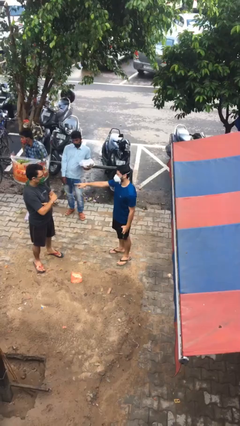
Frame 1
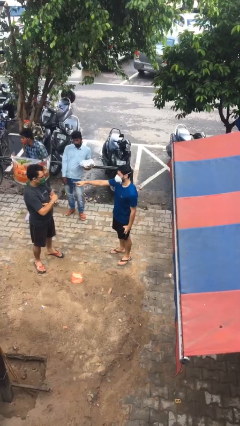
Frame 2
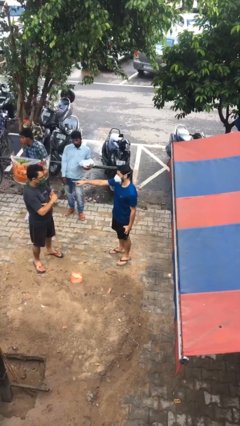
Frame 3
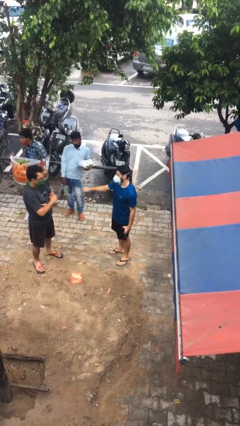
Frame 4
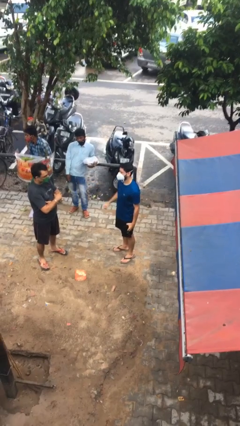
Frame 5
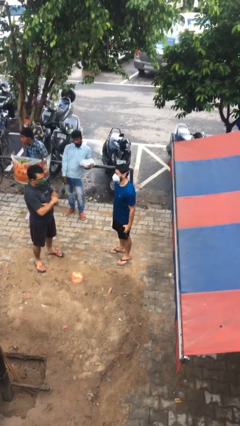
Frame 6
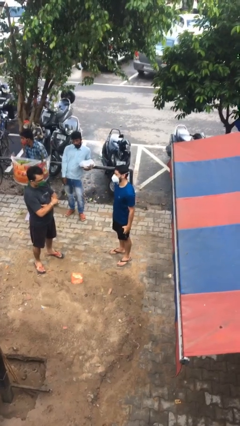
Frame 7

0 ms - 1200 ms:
person points at person

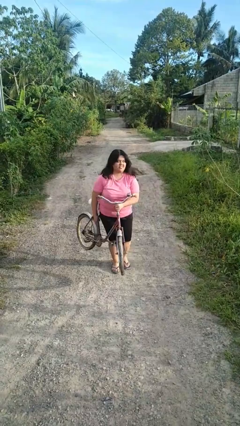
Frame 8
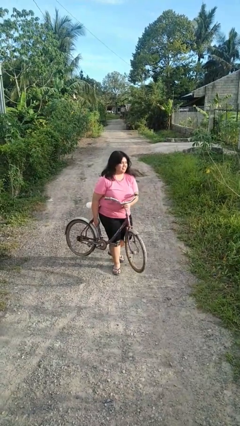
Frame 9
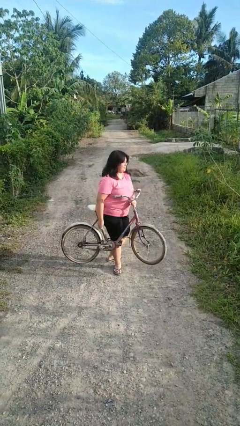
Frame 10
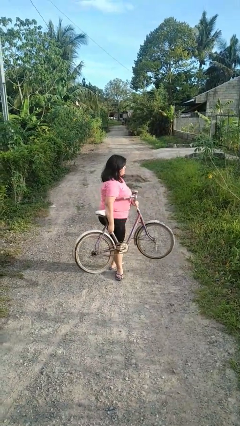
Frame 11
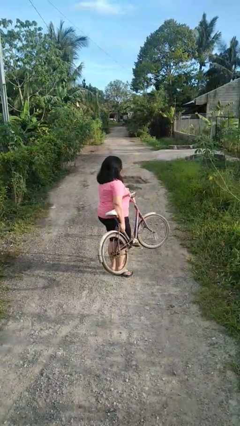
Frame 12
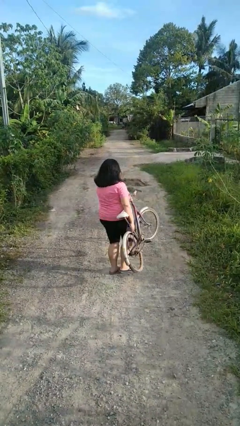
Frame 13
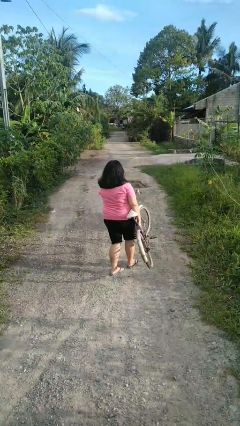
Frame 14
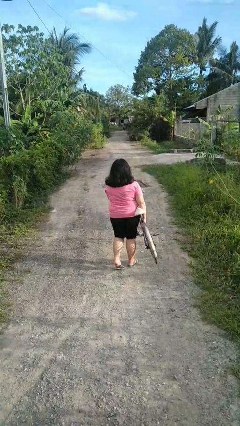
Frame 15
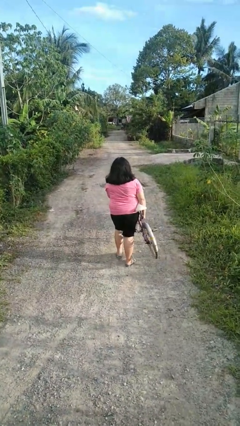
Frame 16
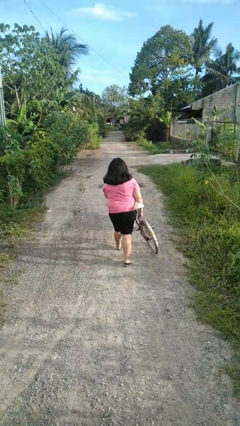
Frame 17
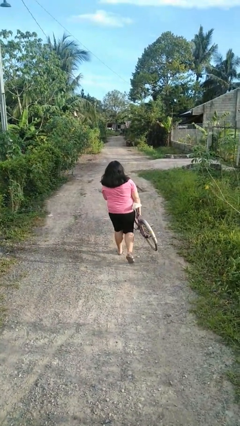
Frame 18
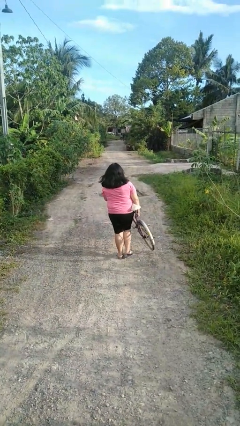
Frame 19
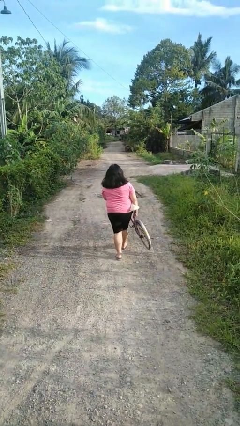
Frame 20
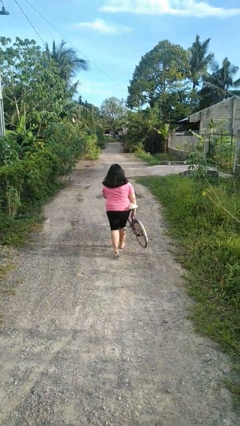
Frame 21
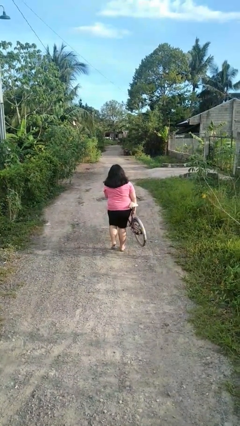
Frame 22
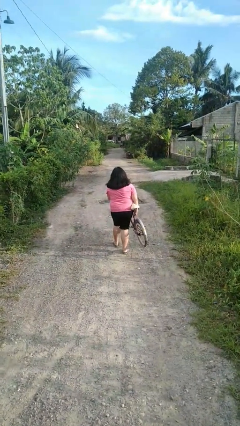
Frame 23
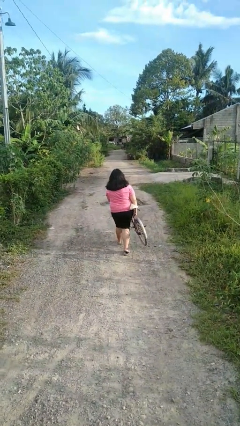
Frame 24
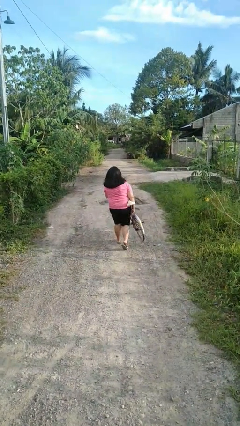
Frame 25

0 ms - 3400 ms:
person carries bicycle

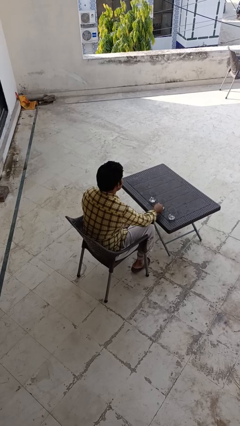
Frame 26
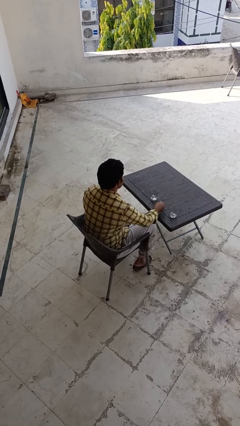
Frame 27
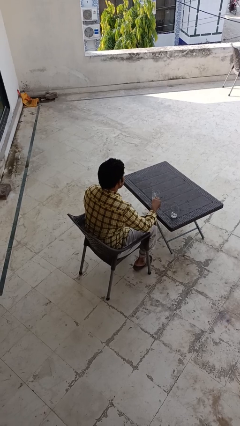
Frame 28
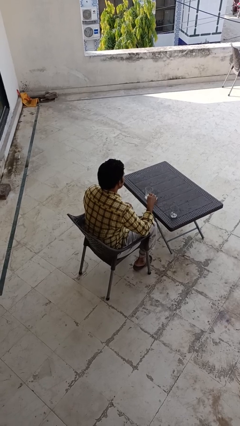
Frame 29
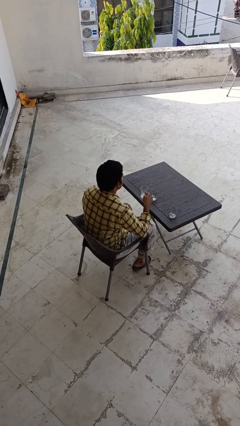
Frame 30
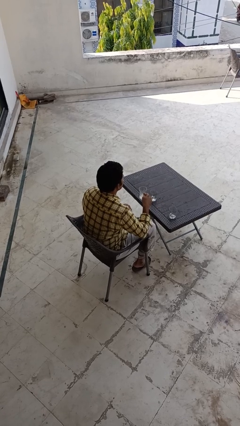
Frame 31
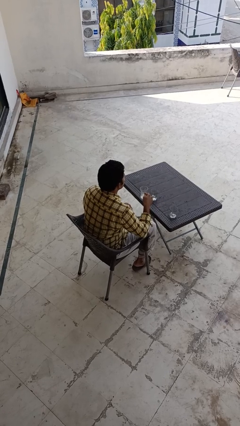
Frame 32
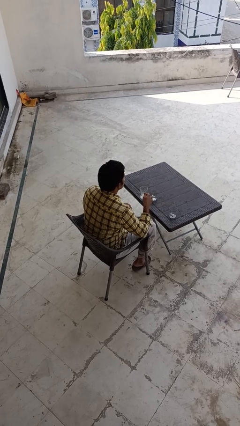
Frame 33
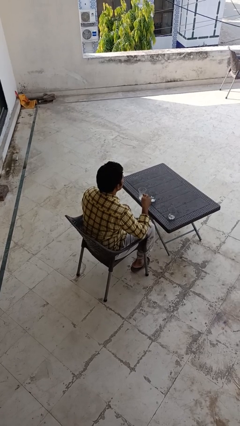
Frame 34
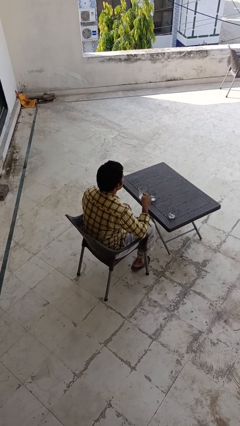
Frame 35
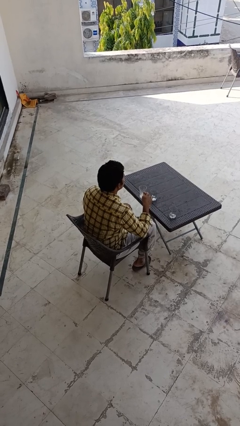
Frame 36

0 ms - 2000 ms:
person picks up object from table

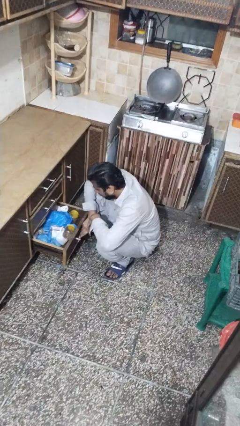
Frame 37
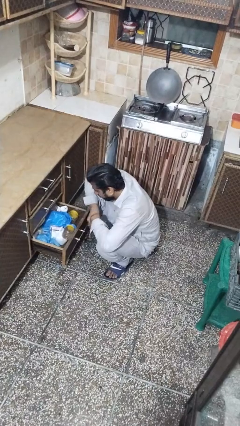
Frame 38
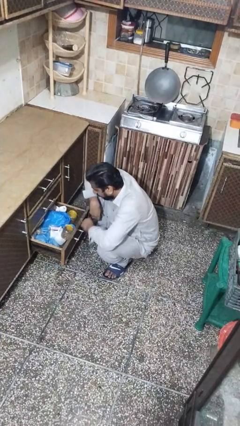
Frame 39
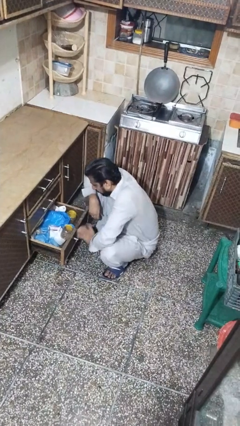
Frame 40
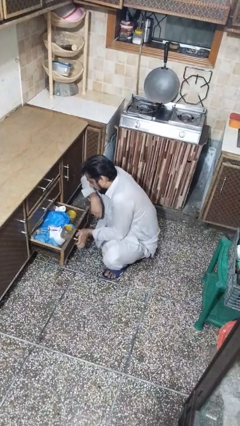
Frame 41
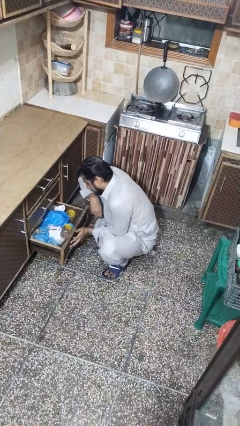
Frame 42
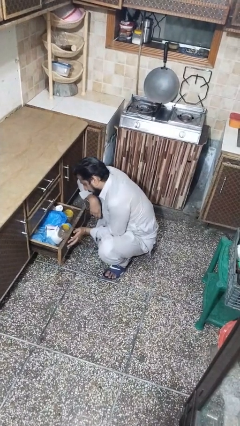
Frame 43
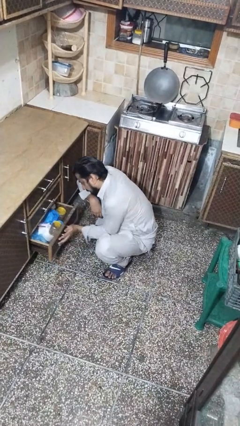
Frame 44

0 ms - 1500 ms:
person closes kitchen drawer

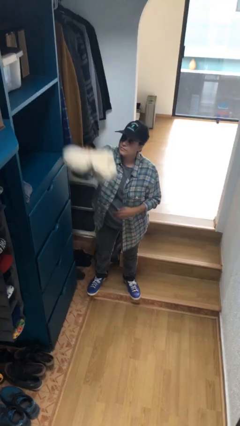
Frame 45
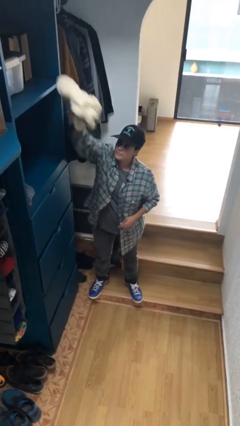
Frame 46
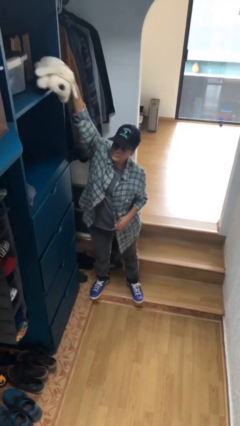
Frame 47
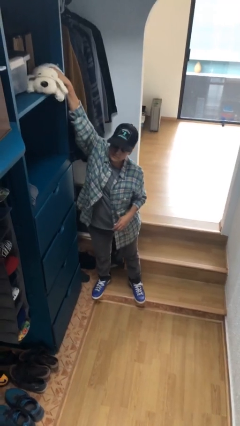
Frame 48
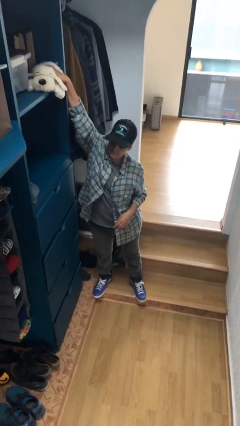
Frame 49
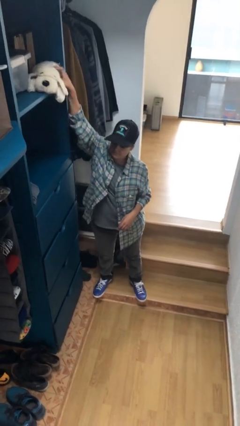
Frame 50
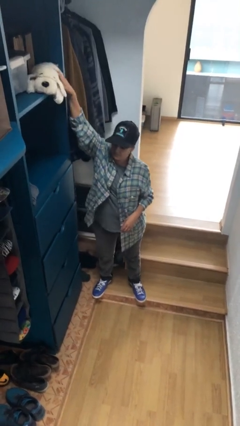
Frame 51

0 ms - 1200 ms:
person puts down object on shelf

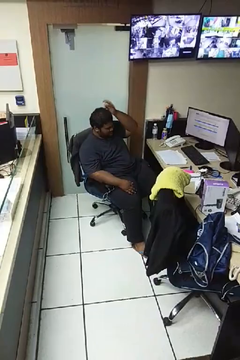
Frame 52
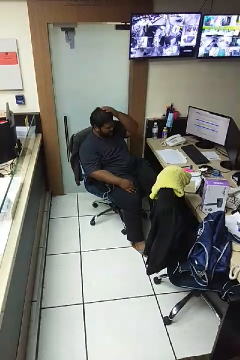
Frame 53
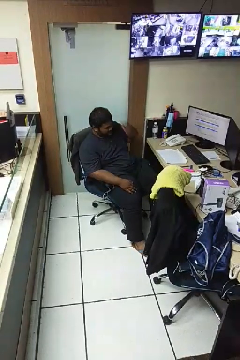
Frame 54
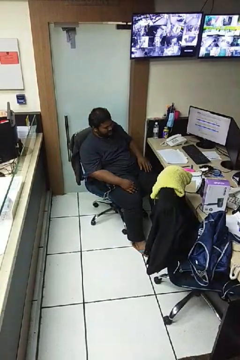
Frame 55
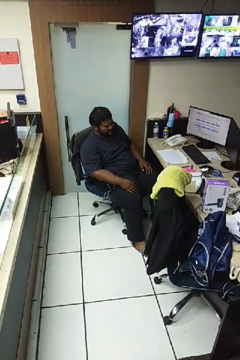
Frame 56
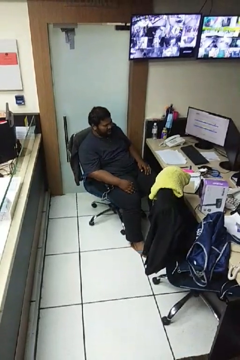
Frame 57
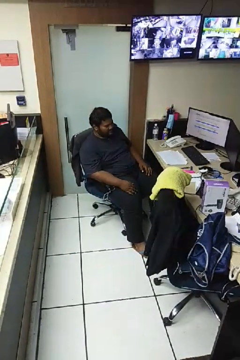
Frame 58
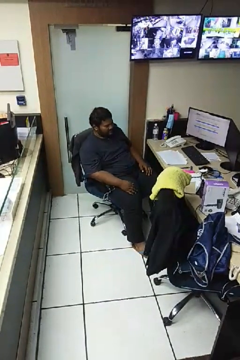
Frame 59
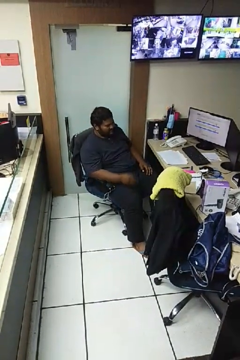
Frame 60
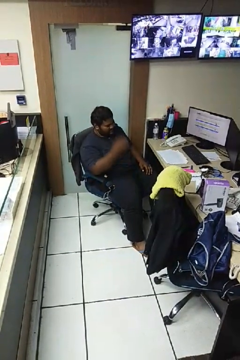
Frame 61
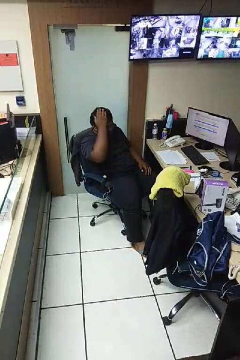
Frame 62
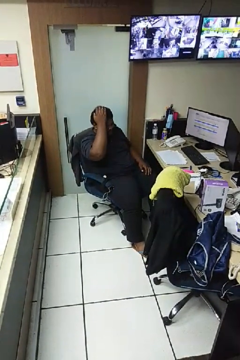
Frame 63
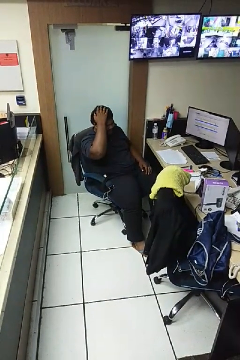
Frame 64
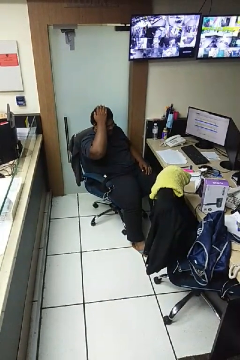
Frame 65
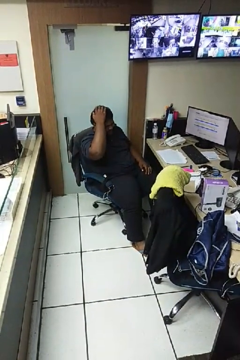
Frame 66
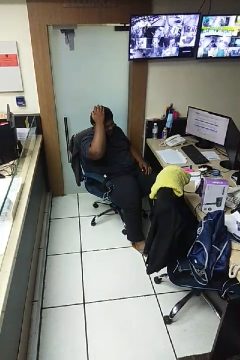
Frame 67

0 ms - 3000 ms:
person pats head

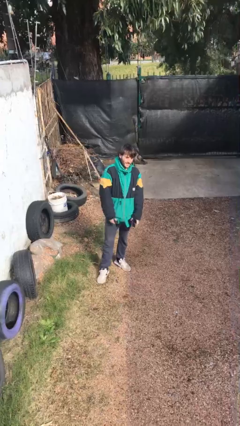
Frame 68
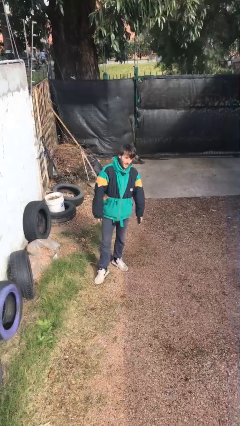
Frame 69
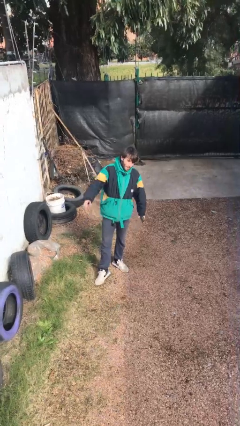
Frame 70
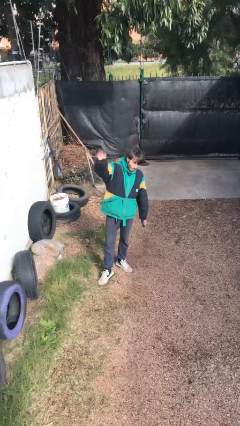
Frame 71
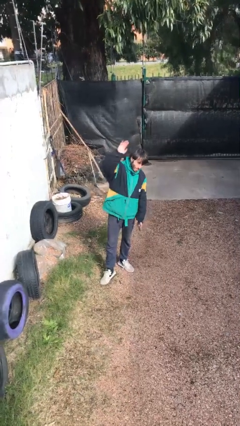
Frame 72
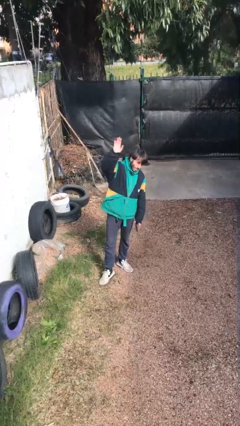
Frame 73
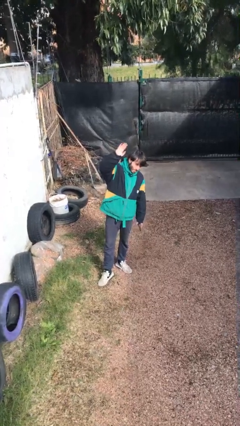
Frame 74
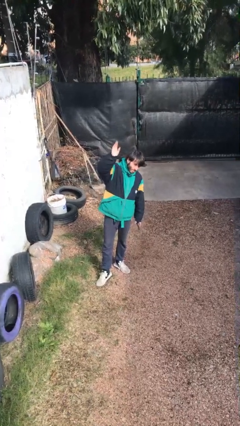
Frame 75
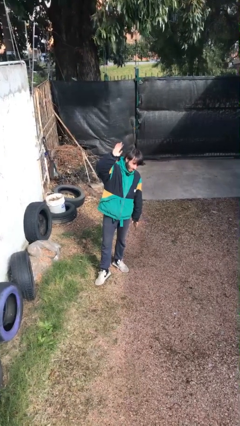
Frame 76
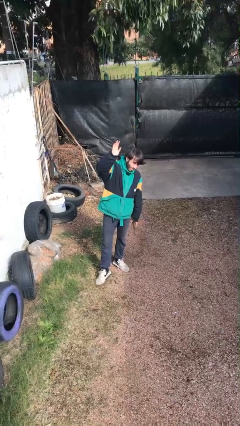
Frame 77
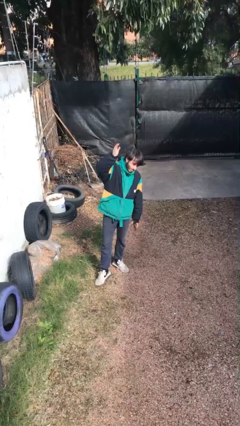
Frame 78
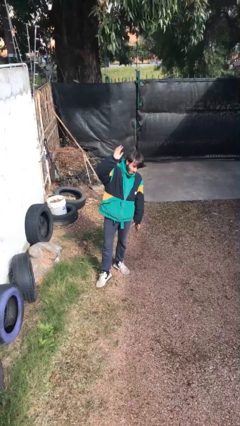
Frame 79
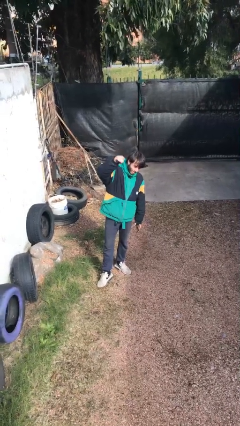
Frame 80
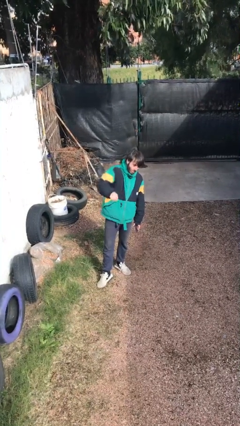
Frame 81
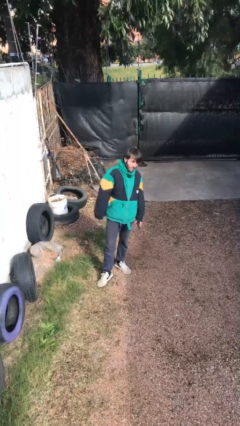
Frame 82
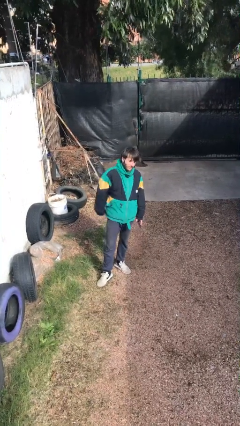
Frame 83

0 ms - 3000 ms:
person waves at person

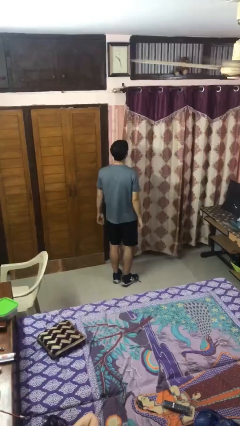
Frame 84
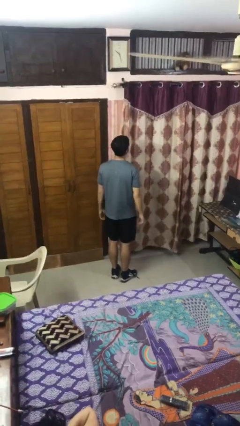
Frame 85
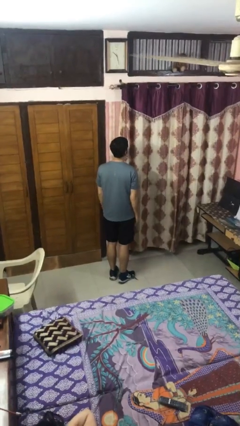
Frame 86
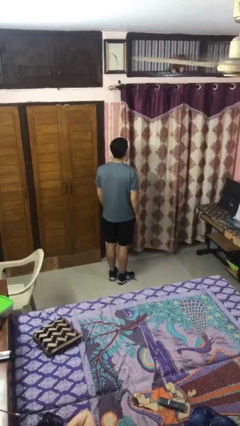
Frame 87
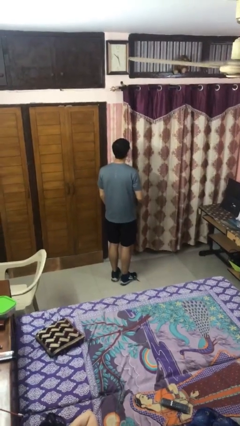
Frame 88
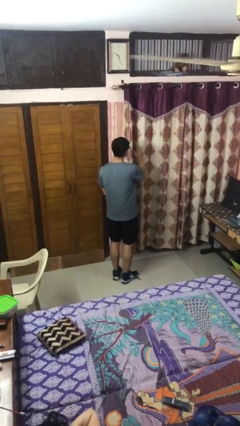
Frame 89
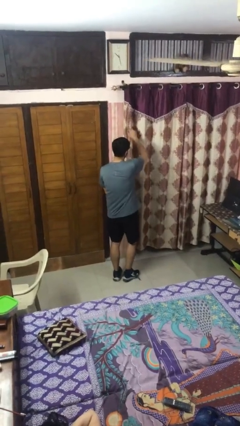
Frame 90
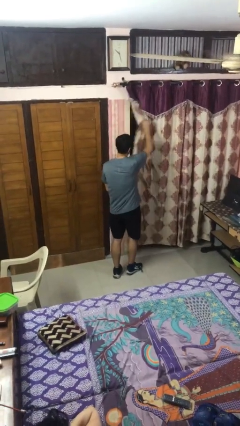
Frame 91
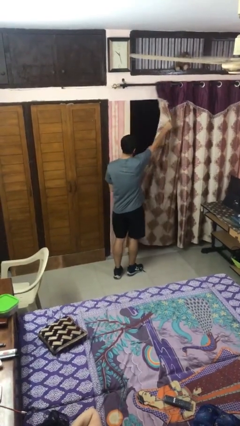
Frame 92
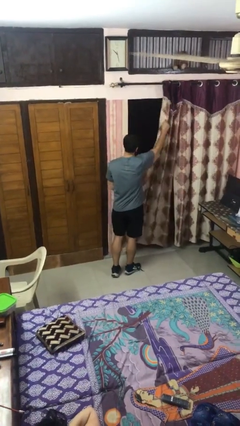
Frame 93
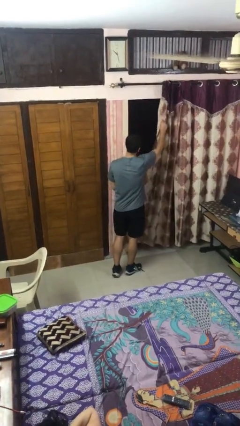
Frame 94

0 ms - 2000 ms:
person opens curtains
